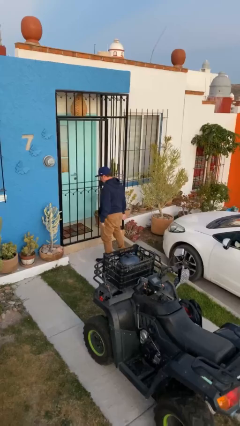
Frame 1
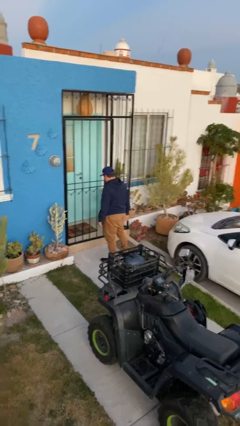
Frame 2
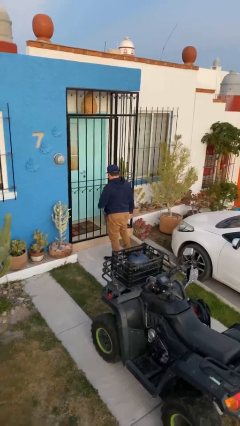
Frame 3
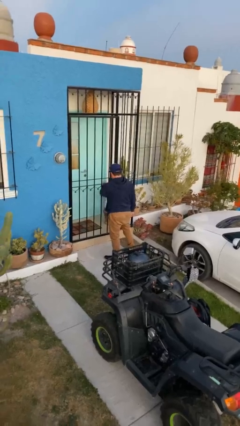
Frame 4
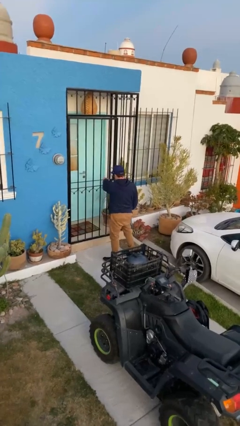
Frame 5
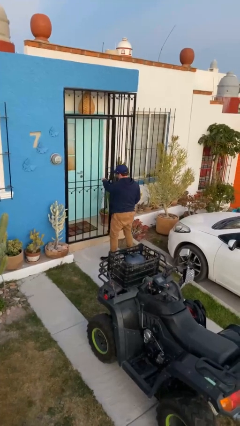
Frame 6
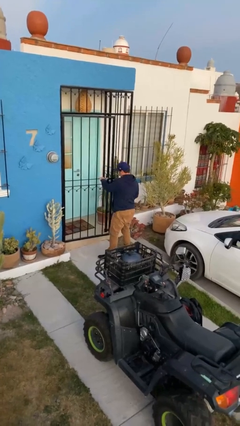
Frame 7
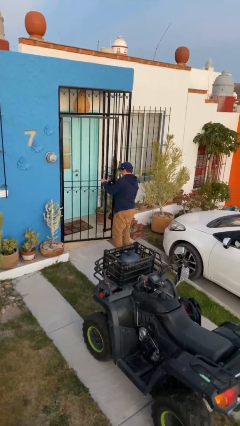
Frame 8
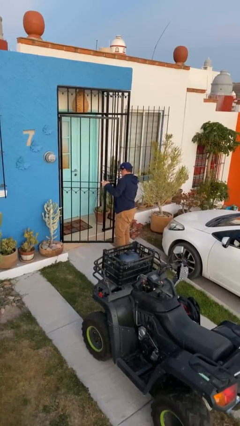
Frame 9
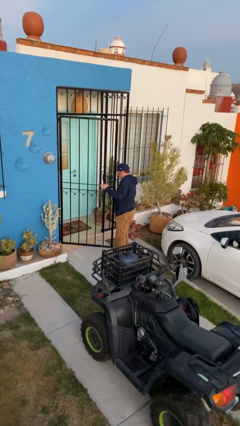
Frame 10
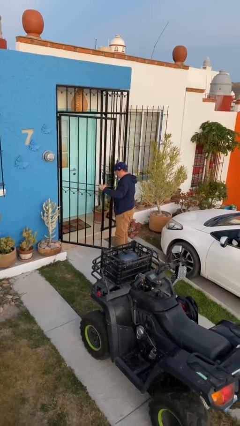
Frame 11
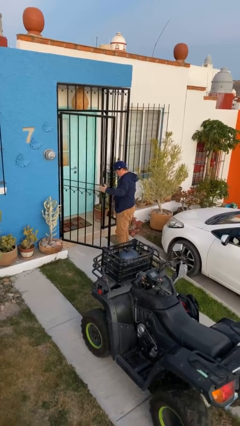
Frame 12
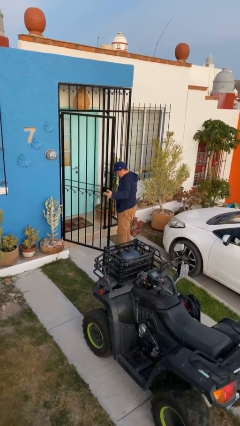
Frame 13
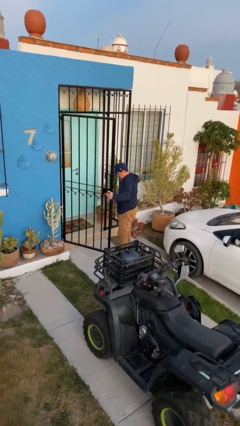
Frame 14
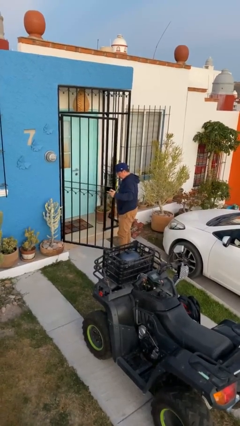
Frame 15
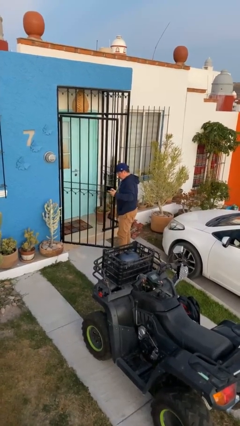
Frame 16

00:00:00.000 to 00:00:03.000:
person opens facility door

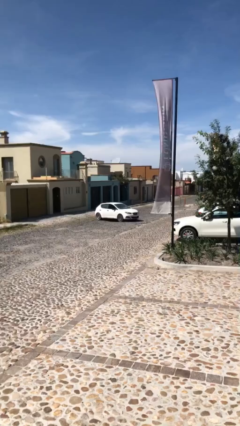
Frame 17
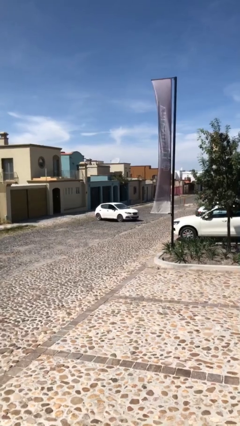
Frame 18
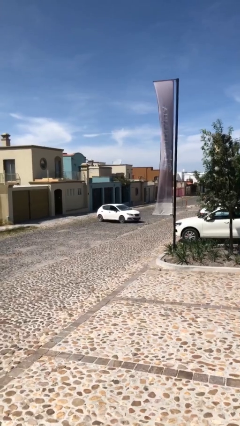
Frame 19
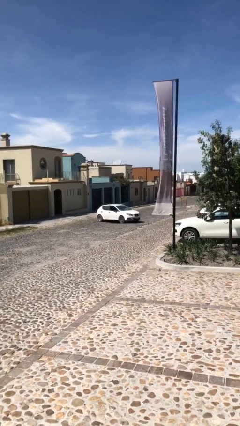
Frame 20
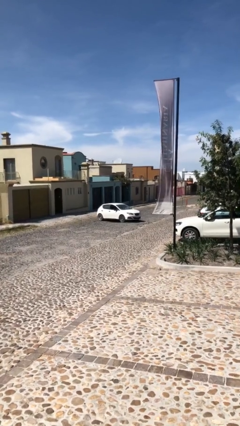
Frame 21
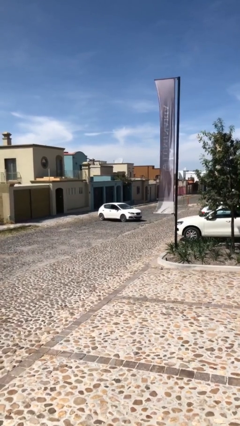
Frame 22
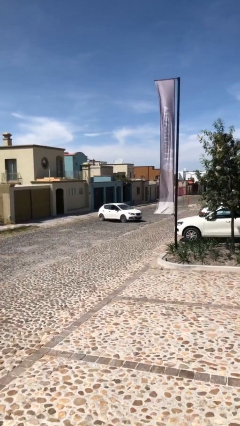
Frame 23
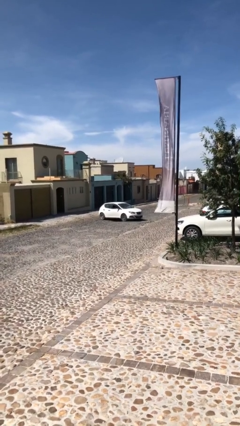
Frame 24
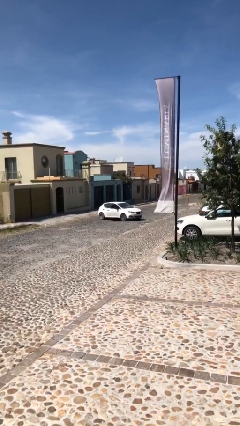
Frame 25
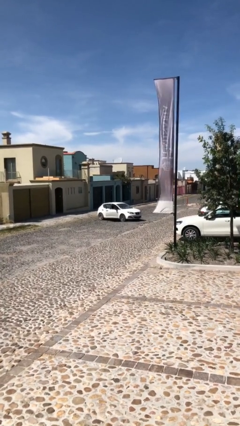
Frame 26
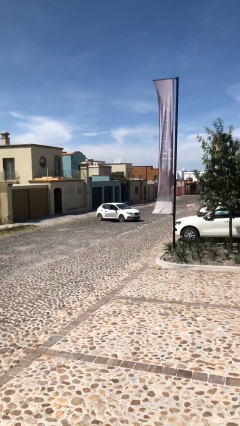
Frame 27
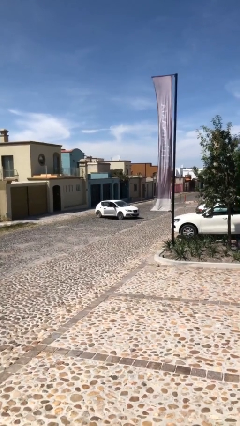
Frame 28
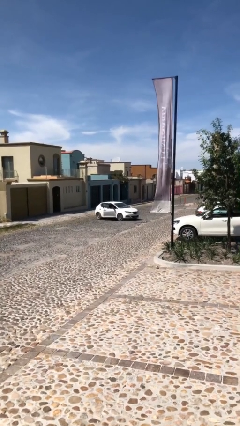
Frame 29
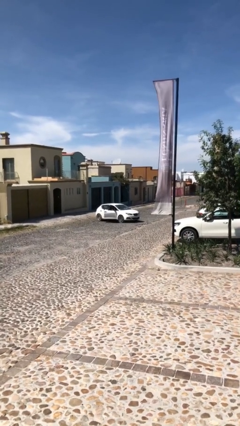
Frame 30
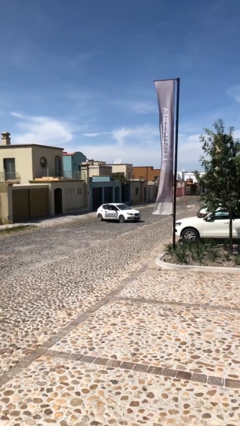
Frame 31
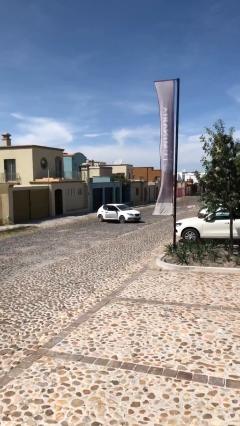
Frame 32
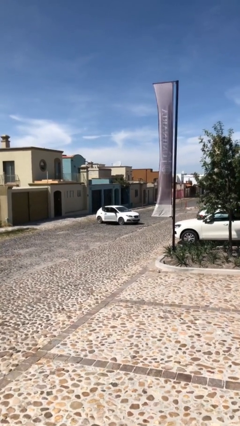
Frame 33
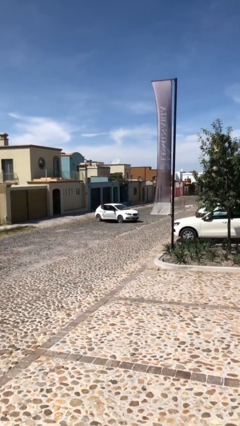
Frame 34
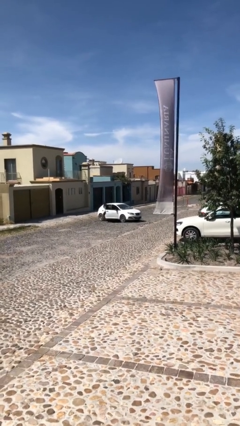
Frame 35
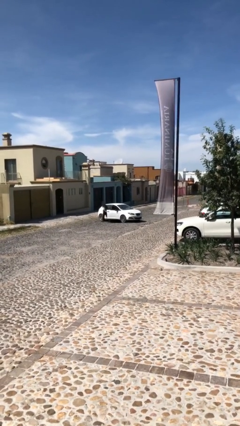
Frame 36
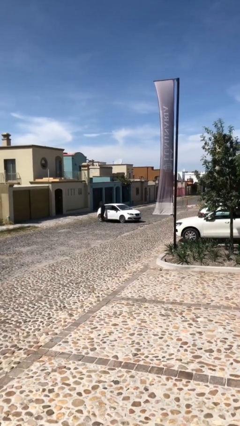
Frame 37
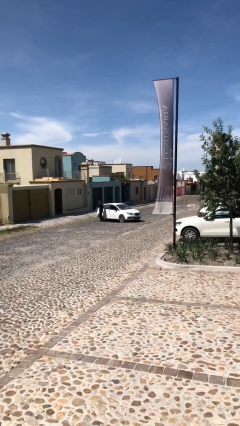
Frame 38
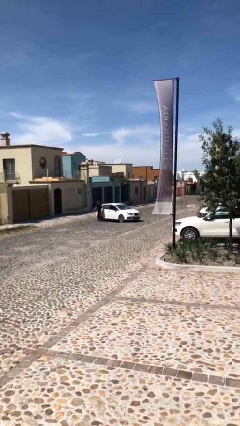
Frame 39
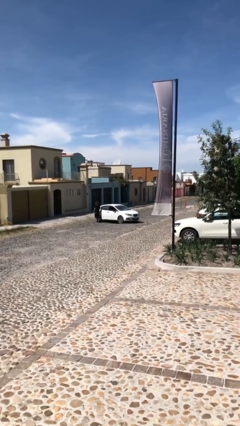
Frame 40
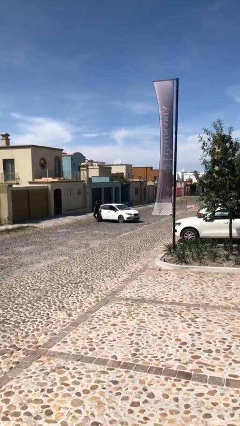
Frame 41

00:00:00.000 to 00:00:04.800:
car drops off person

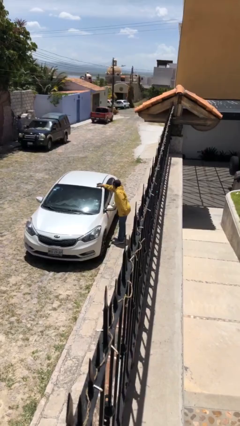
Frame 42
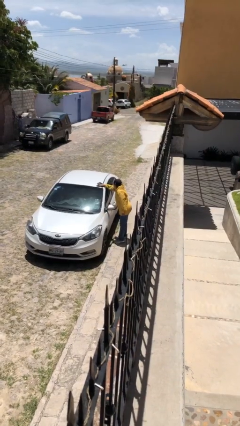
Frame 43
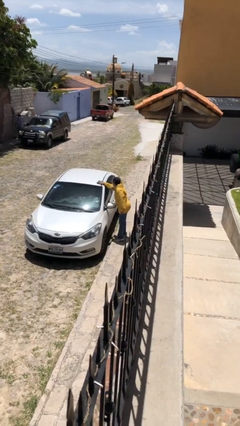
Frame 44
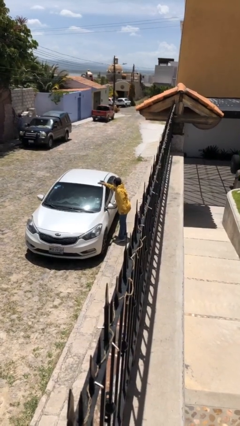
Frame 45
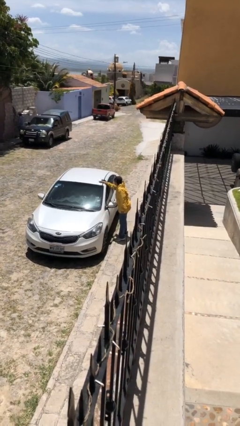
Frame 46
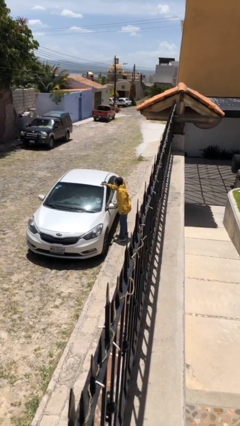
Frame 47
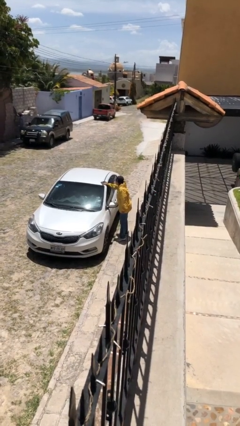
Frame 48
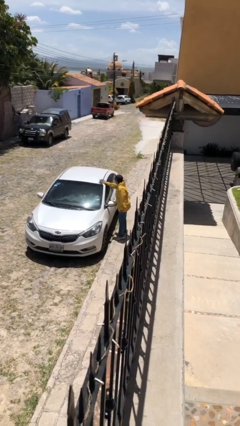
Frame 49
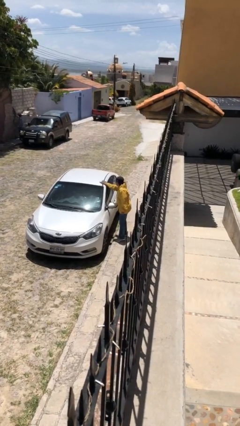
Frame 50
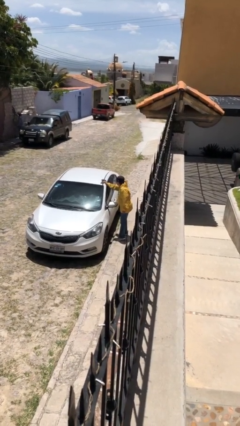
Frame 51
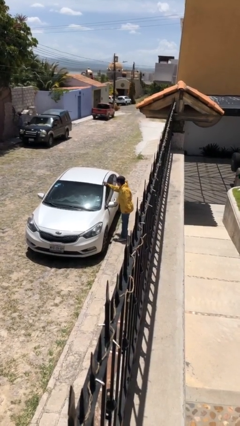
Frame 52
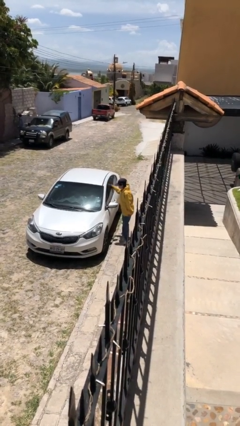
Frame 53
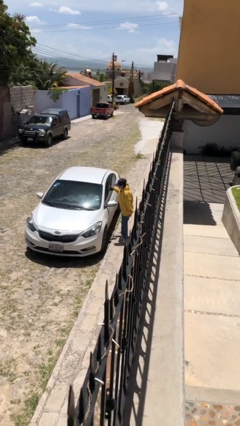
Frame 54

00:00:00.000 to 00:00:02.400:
person polishes car with rag

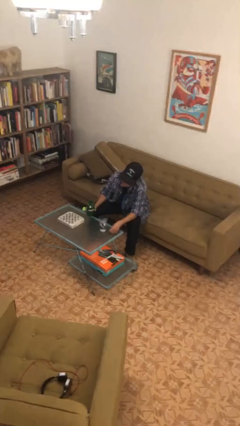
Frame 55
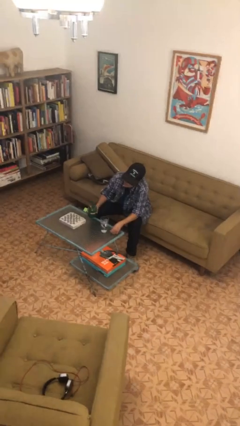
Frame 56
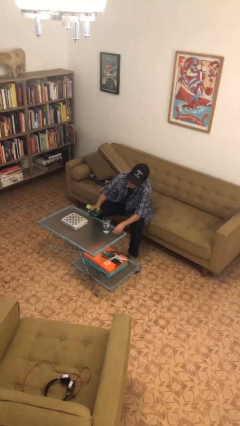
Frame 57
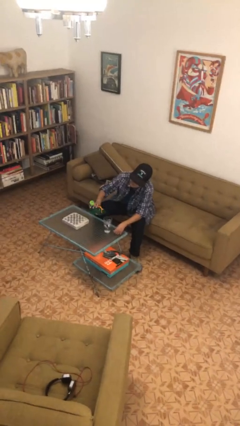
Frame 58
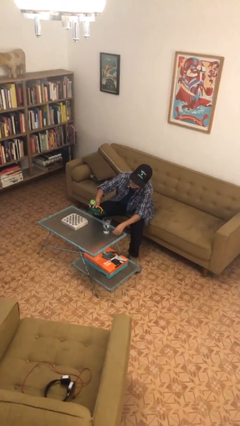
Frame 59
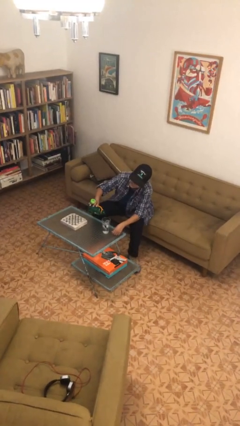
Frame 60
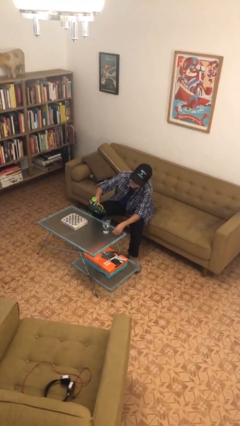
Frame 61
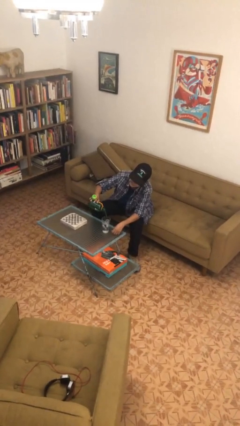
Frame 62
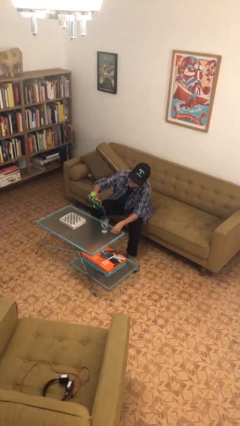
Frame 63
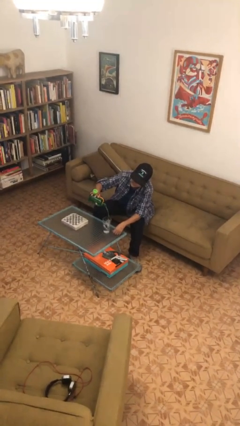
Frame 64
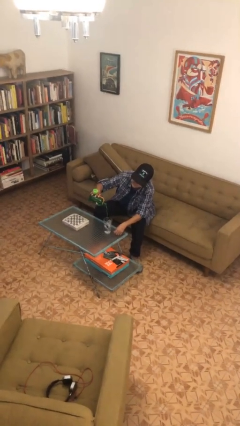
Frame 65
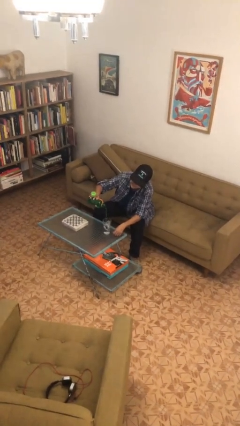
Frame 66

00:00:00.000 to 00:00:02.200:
person pours liquid into cup

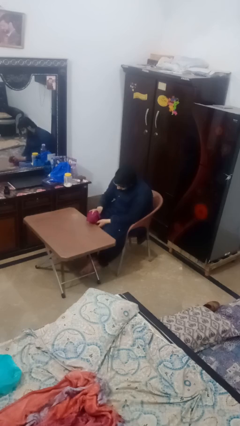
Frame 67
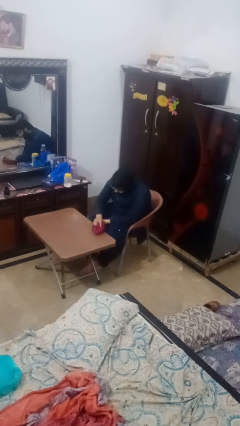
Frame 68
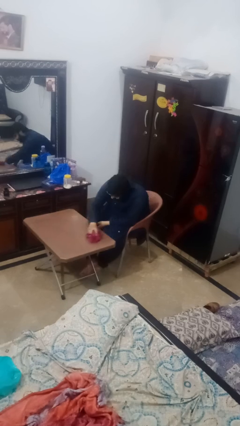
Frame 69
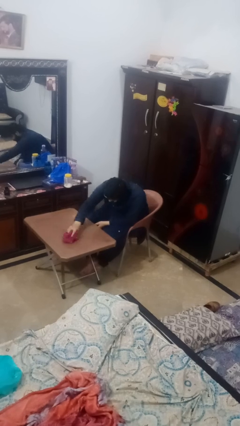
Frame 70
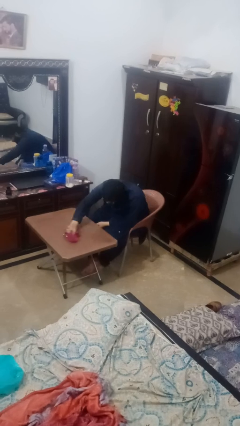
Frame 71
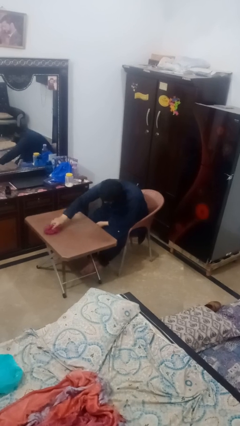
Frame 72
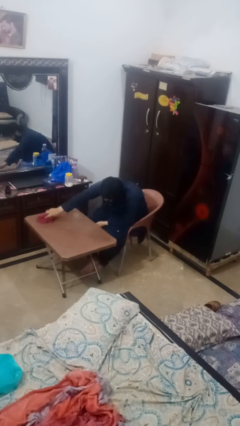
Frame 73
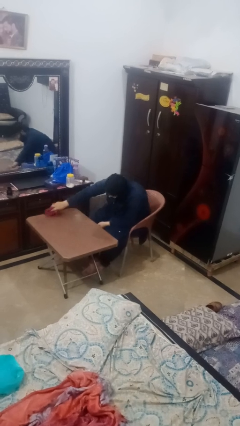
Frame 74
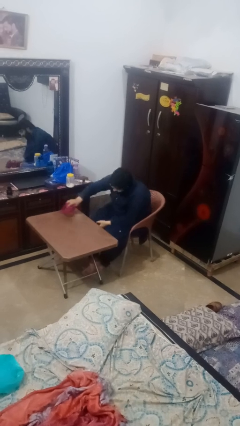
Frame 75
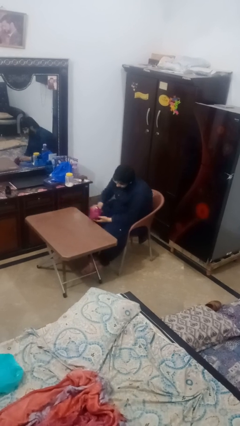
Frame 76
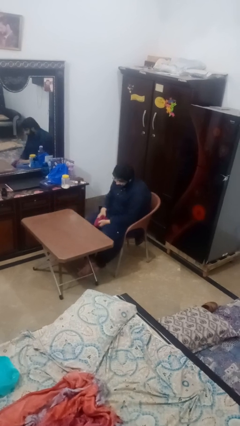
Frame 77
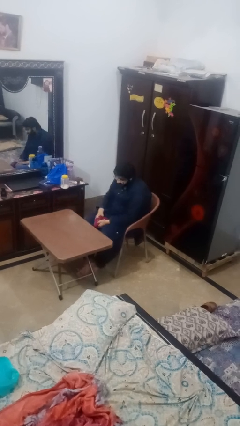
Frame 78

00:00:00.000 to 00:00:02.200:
person cleans table with rag

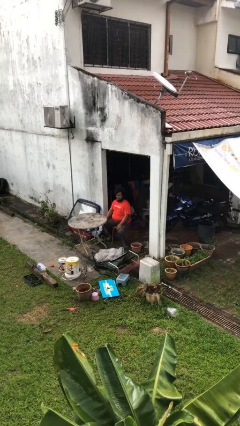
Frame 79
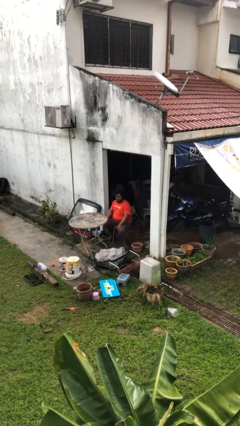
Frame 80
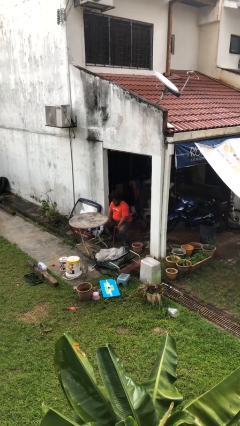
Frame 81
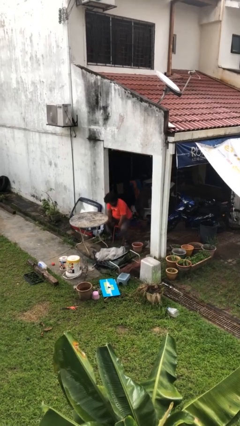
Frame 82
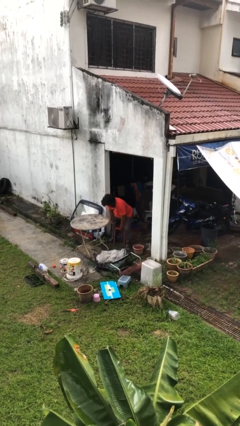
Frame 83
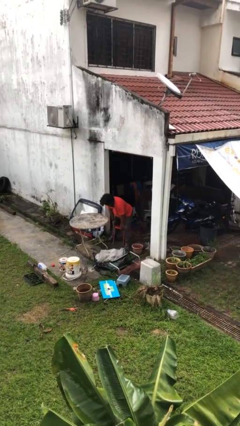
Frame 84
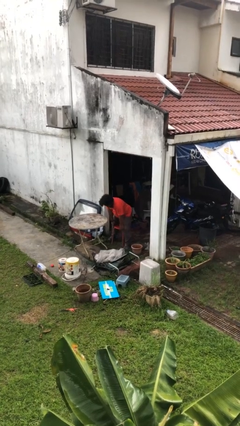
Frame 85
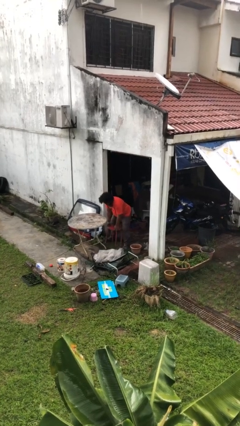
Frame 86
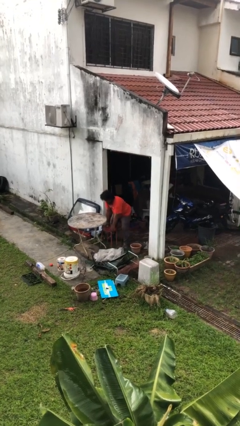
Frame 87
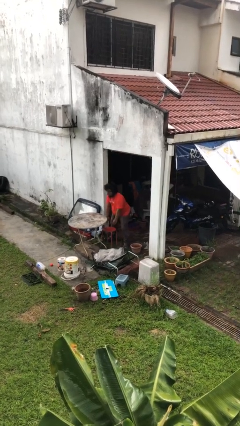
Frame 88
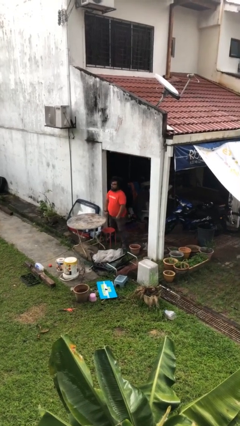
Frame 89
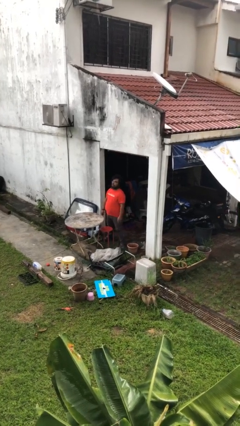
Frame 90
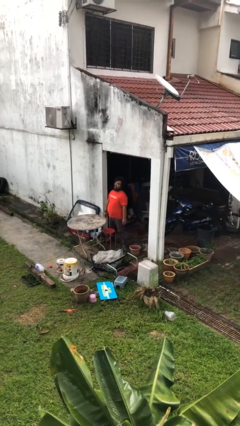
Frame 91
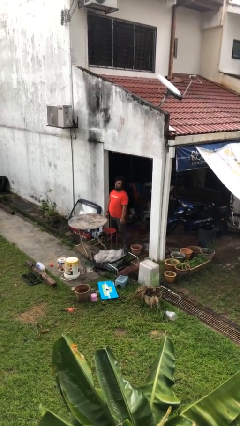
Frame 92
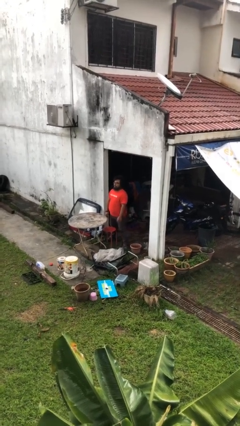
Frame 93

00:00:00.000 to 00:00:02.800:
person stands up
